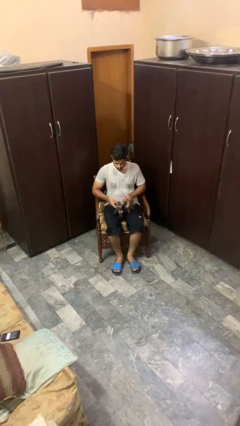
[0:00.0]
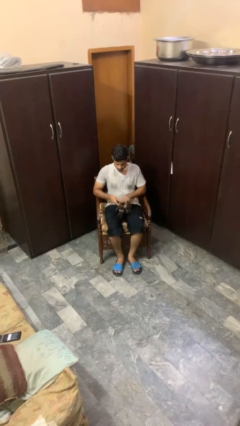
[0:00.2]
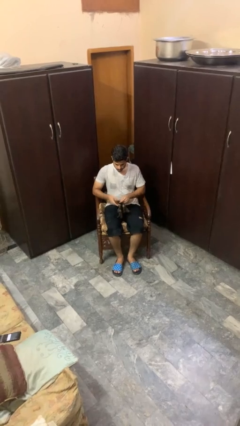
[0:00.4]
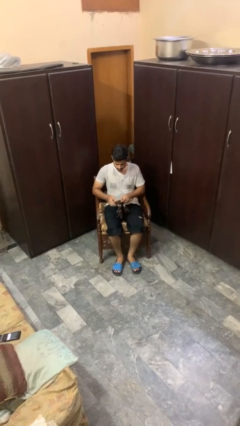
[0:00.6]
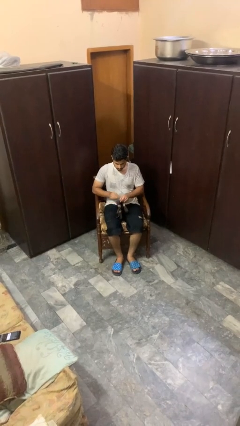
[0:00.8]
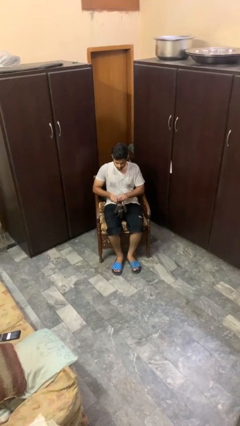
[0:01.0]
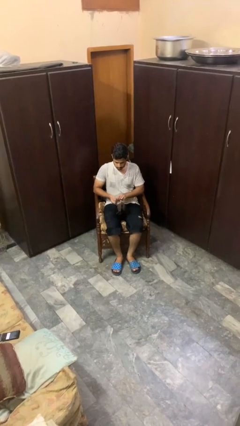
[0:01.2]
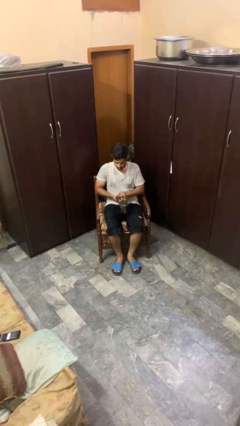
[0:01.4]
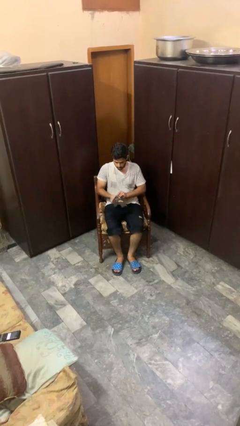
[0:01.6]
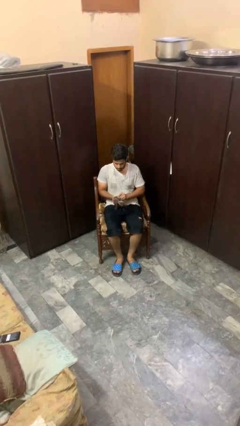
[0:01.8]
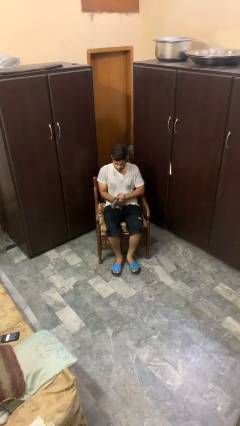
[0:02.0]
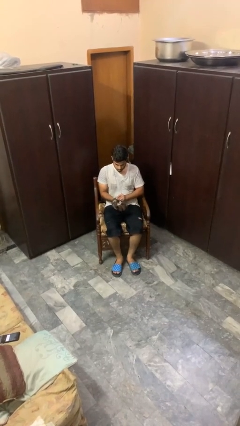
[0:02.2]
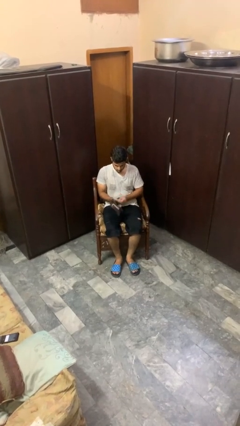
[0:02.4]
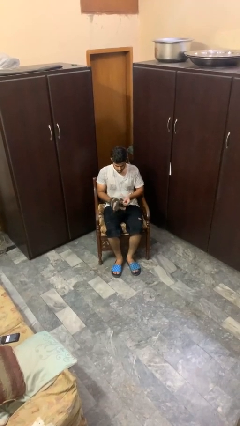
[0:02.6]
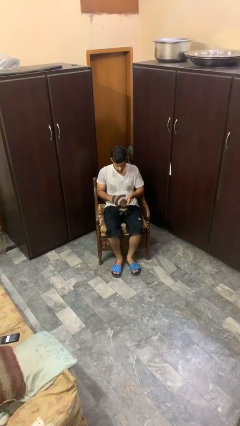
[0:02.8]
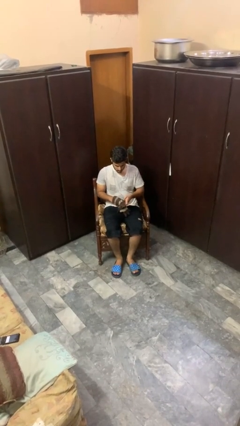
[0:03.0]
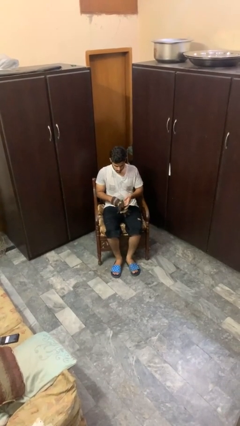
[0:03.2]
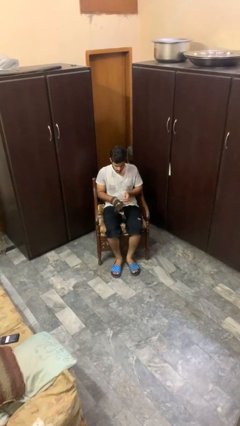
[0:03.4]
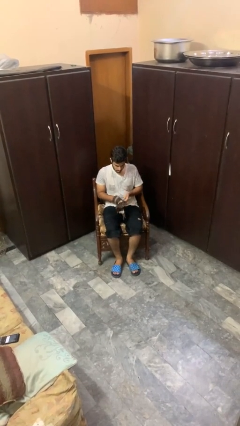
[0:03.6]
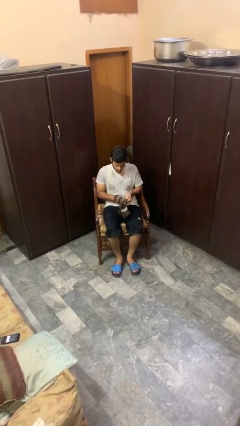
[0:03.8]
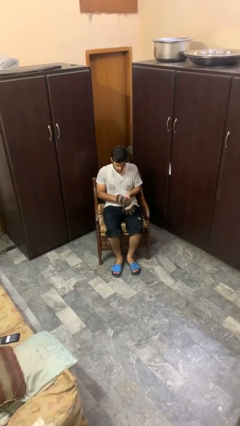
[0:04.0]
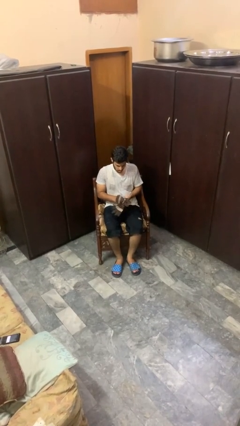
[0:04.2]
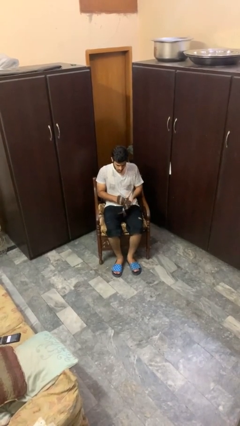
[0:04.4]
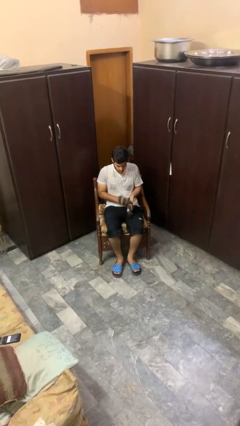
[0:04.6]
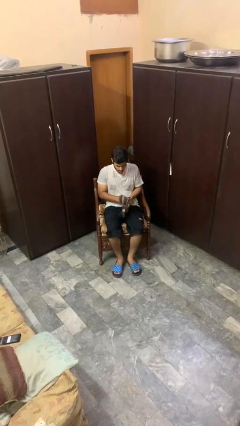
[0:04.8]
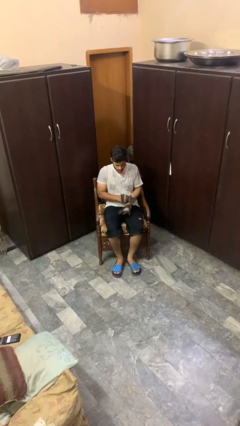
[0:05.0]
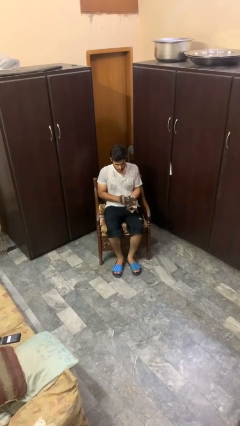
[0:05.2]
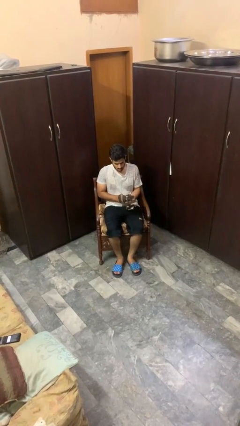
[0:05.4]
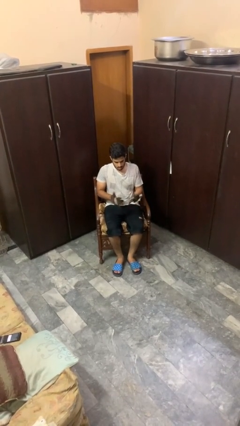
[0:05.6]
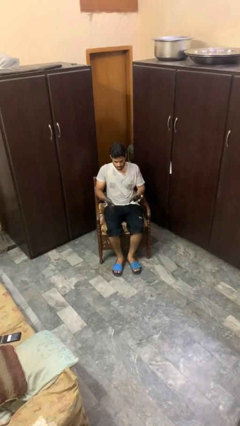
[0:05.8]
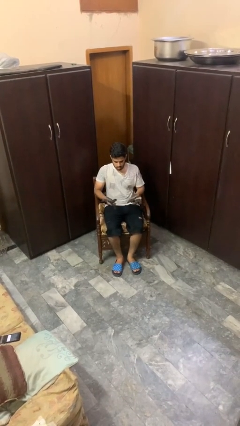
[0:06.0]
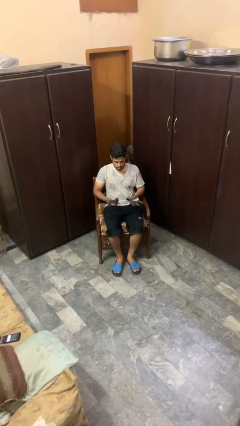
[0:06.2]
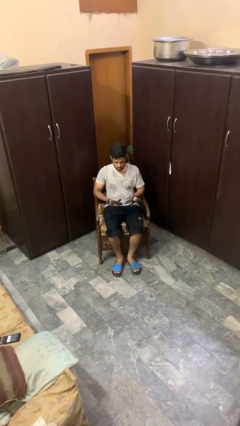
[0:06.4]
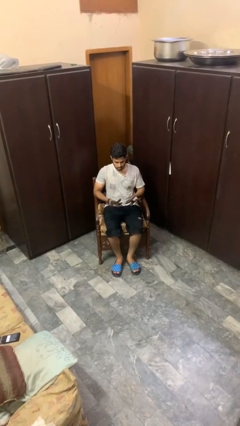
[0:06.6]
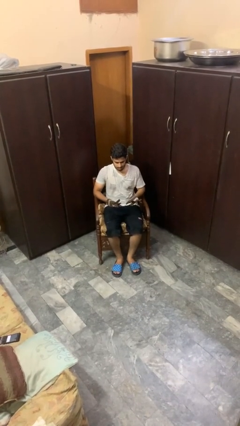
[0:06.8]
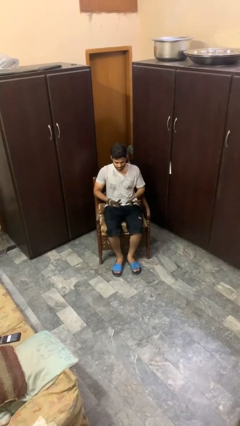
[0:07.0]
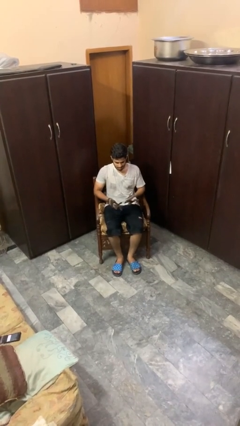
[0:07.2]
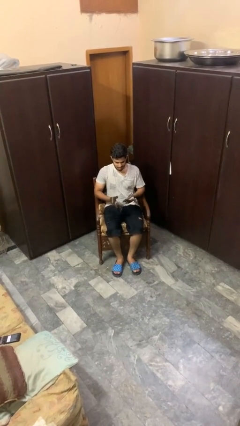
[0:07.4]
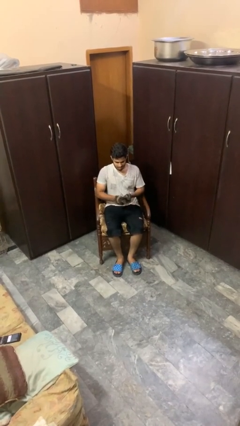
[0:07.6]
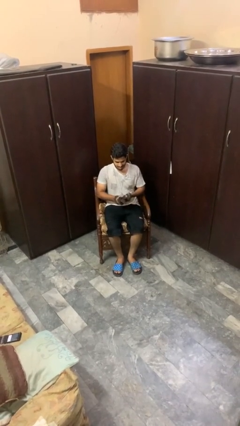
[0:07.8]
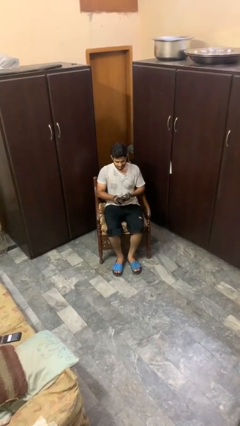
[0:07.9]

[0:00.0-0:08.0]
person puts on gloves

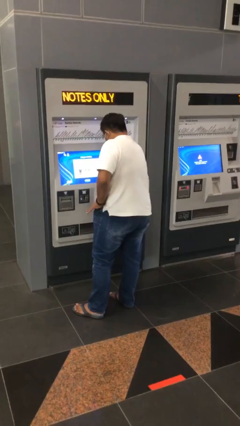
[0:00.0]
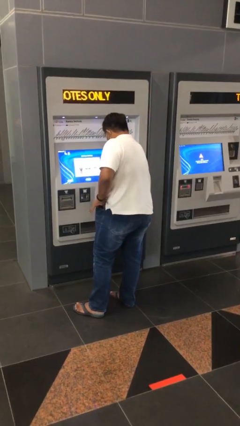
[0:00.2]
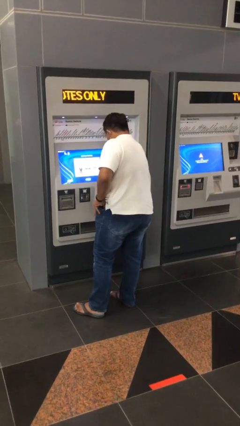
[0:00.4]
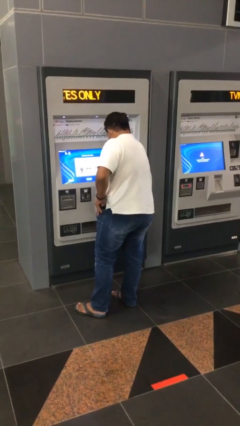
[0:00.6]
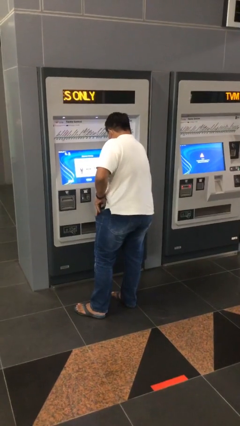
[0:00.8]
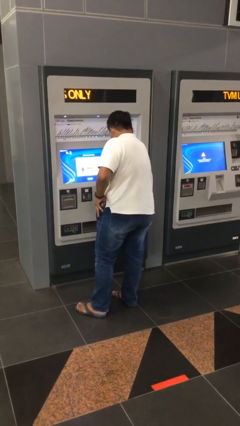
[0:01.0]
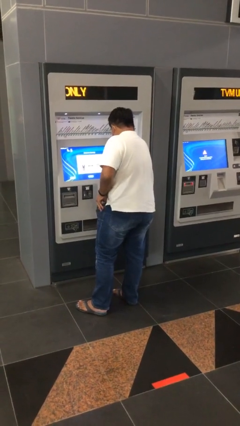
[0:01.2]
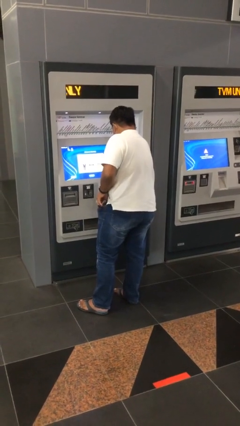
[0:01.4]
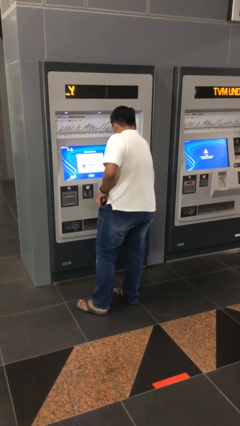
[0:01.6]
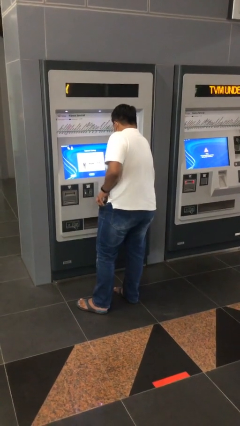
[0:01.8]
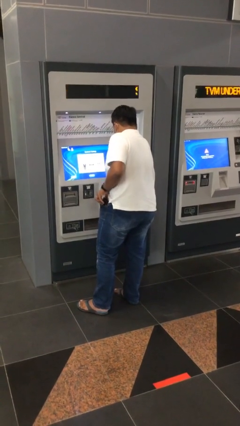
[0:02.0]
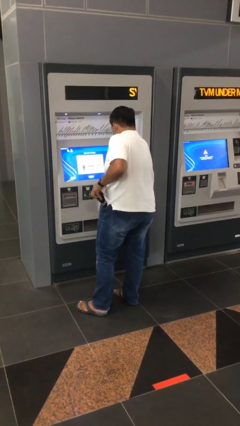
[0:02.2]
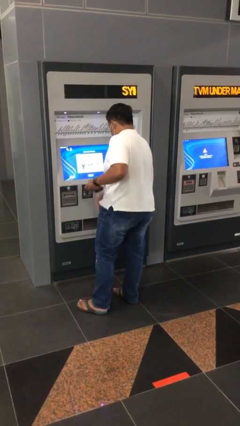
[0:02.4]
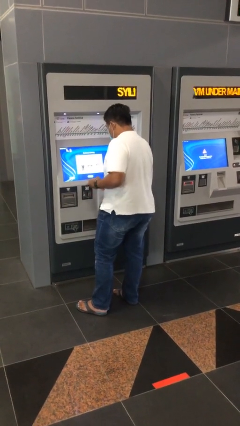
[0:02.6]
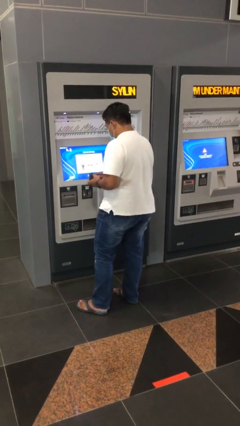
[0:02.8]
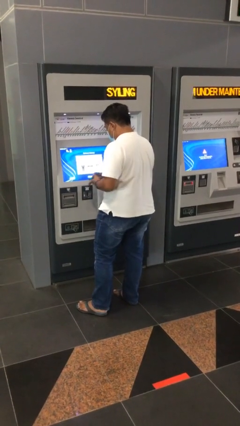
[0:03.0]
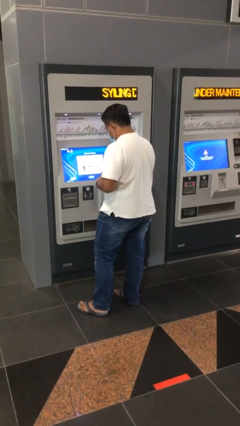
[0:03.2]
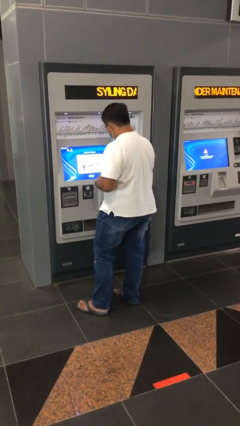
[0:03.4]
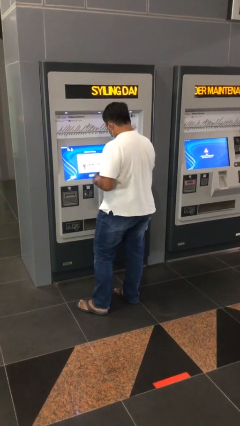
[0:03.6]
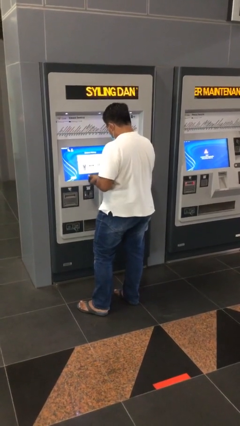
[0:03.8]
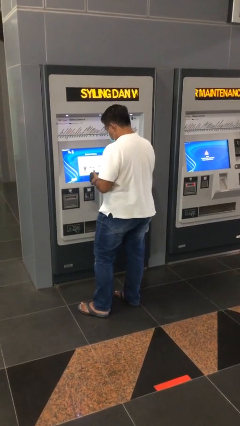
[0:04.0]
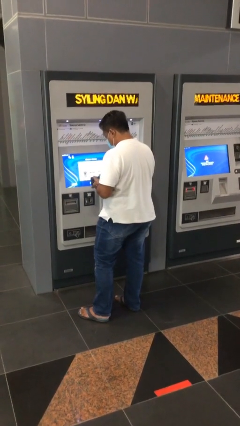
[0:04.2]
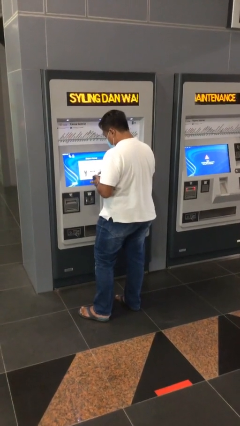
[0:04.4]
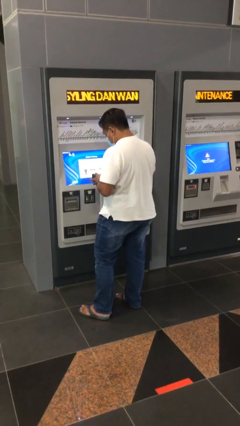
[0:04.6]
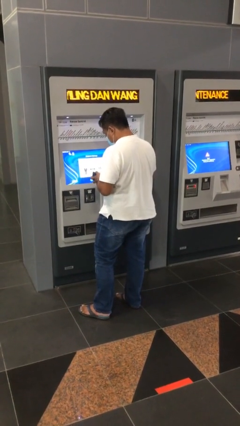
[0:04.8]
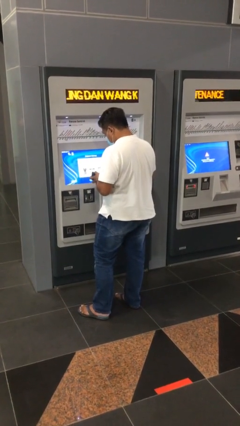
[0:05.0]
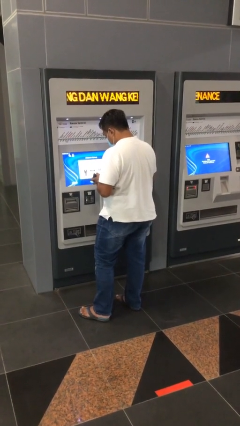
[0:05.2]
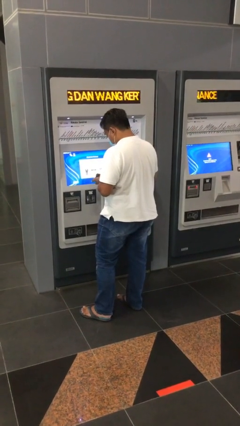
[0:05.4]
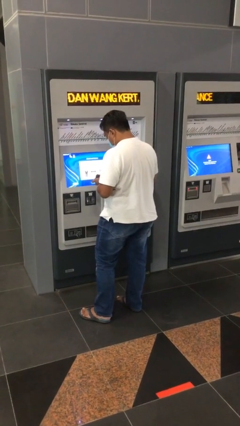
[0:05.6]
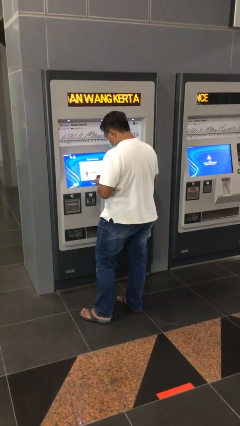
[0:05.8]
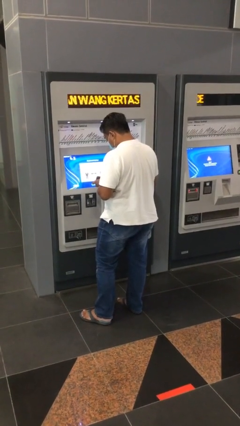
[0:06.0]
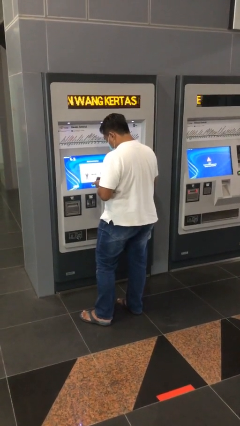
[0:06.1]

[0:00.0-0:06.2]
person purchases from machine

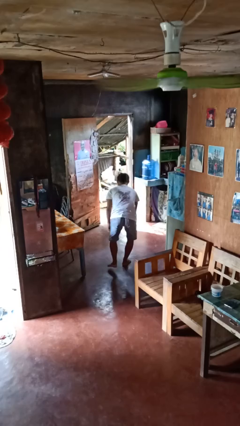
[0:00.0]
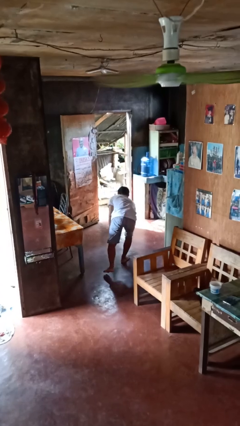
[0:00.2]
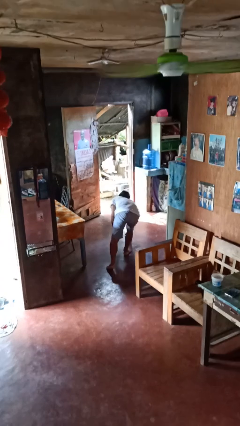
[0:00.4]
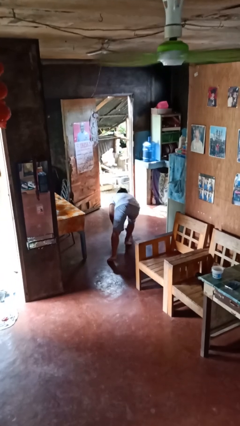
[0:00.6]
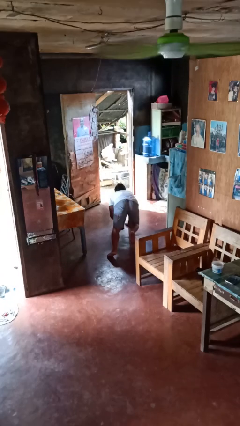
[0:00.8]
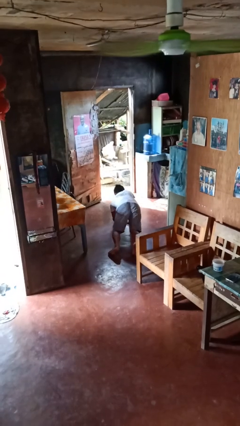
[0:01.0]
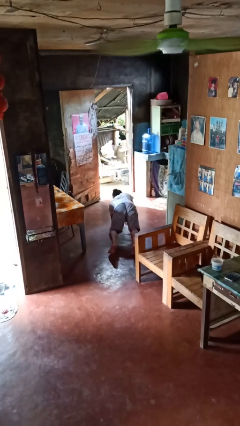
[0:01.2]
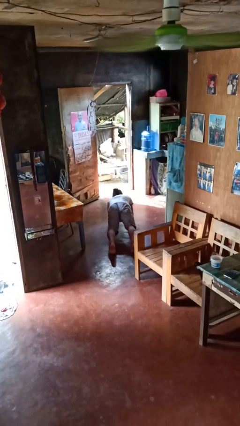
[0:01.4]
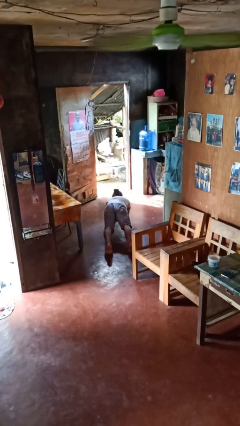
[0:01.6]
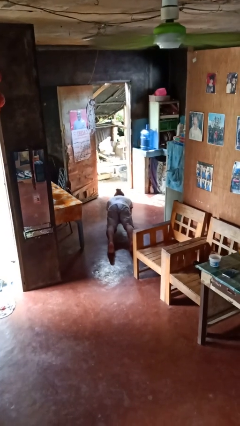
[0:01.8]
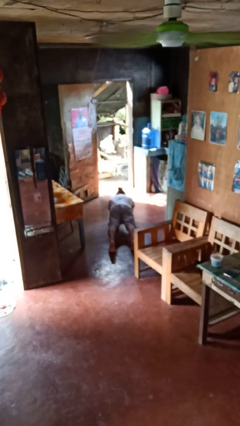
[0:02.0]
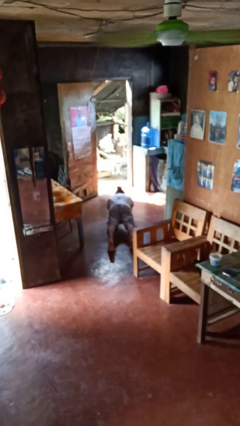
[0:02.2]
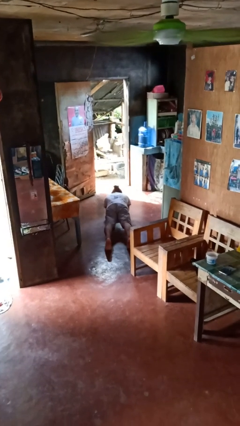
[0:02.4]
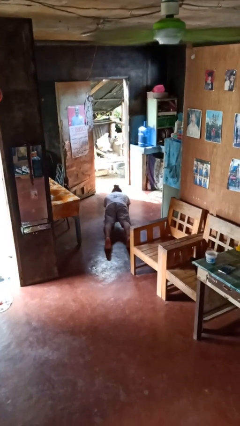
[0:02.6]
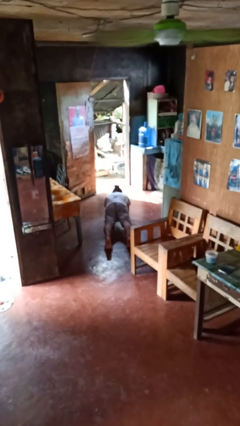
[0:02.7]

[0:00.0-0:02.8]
person exercises with plank

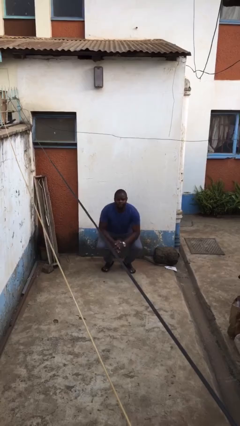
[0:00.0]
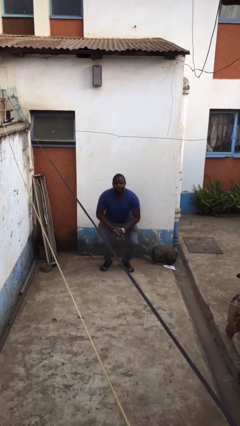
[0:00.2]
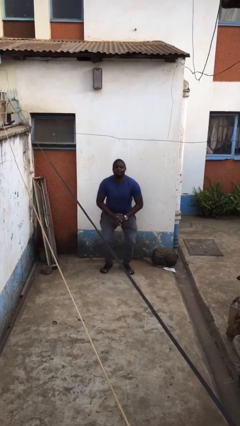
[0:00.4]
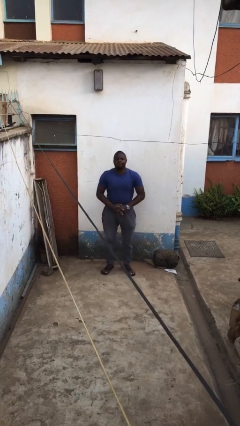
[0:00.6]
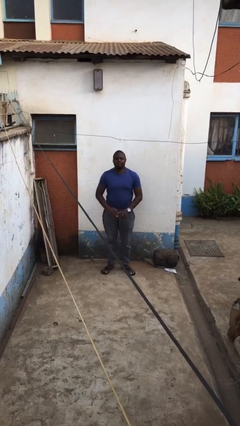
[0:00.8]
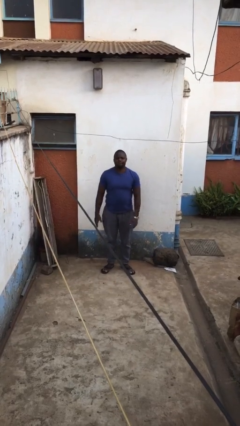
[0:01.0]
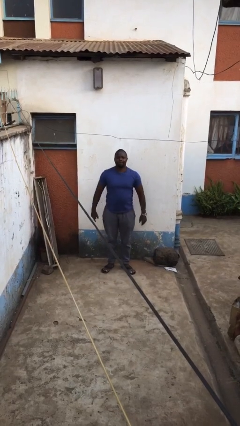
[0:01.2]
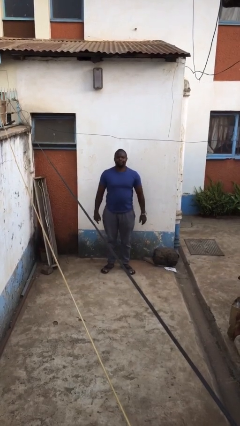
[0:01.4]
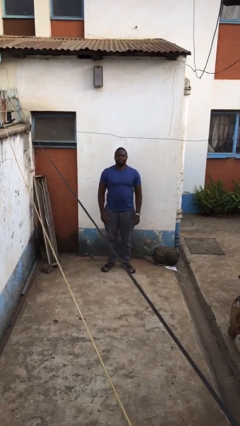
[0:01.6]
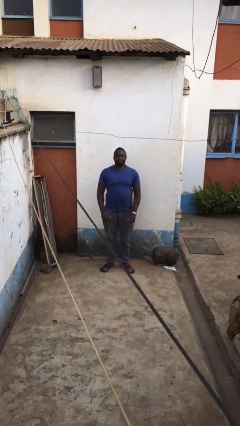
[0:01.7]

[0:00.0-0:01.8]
person stands up
